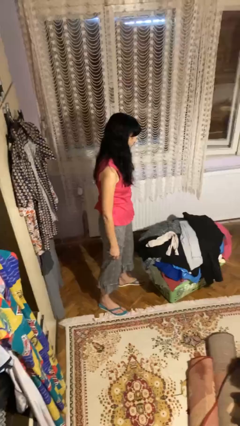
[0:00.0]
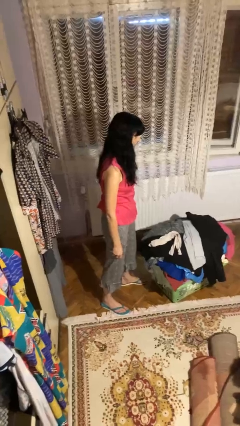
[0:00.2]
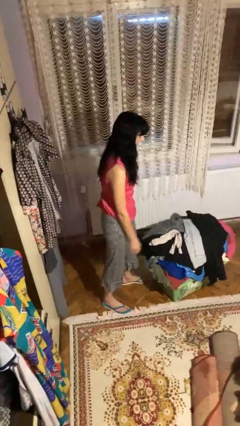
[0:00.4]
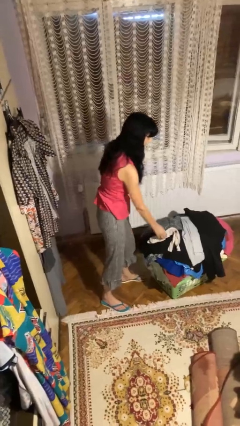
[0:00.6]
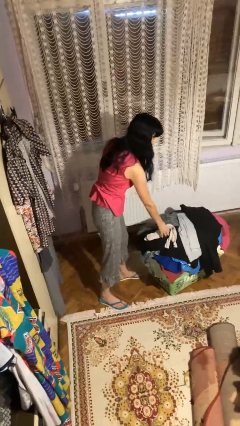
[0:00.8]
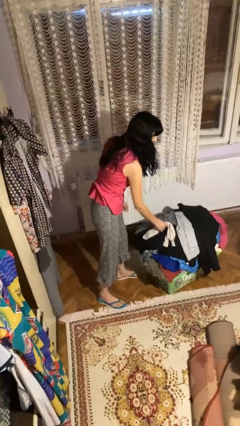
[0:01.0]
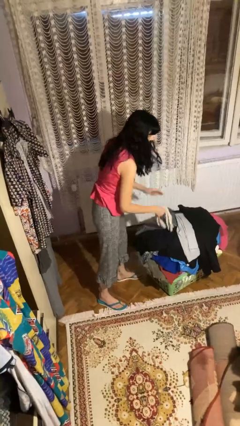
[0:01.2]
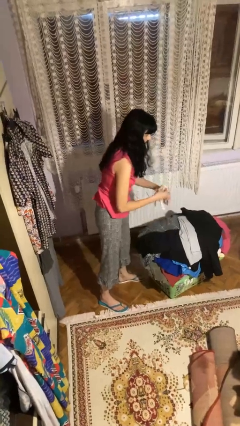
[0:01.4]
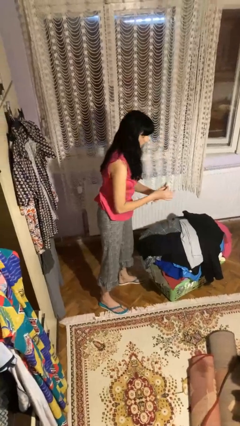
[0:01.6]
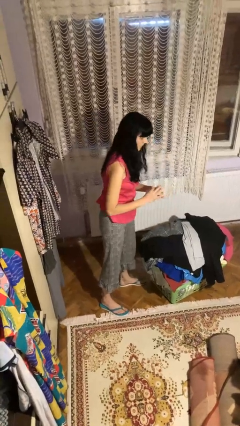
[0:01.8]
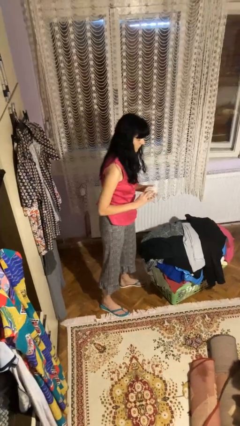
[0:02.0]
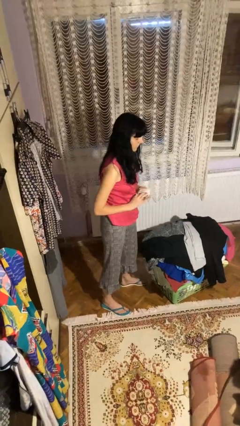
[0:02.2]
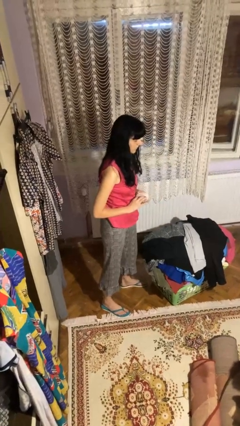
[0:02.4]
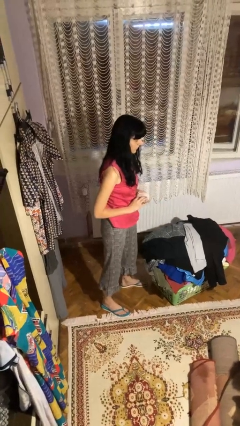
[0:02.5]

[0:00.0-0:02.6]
person folds socks

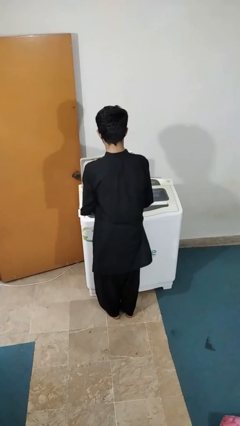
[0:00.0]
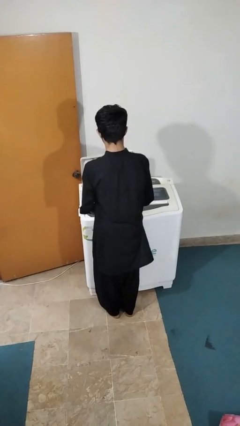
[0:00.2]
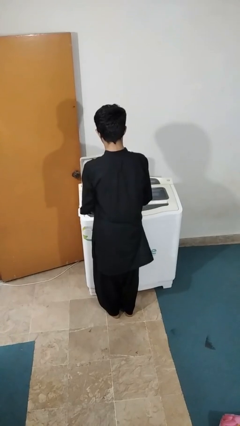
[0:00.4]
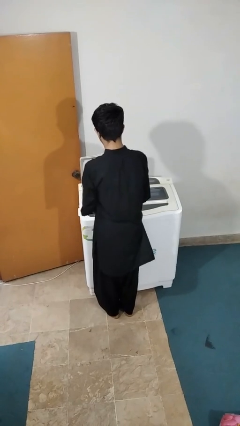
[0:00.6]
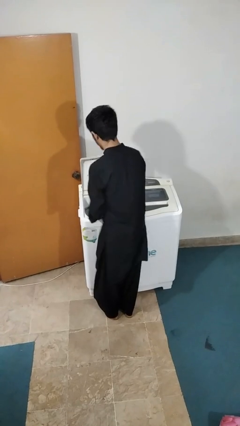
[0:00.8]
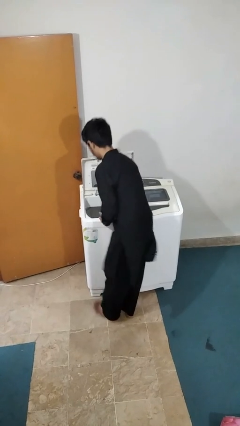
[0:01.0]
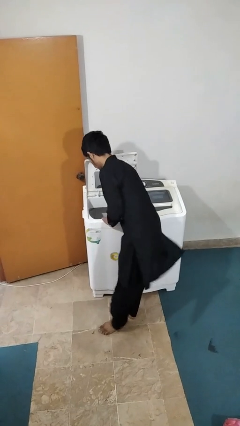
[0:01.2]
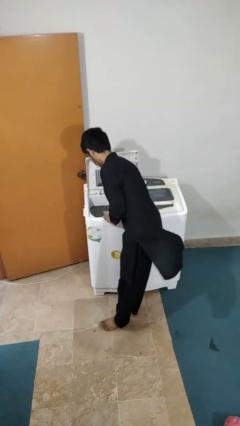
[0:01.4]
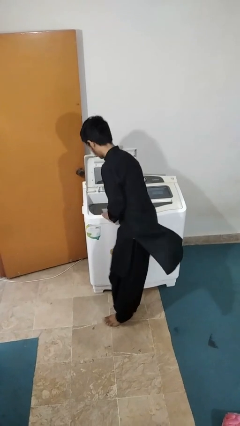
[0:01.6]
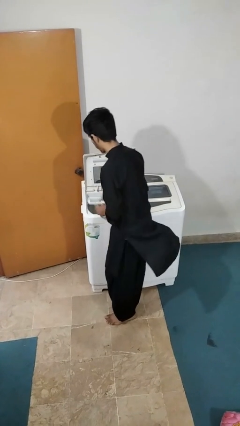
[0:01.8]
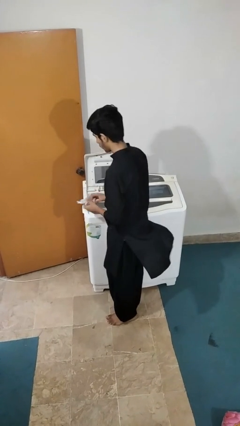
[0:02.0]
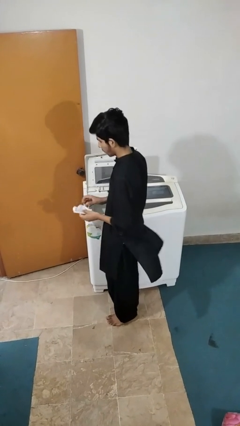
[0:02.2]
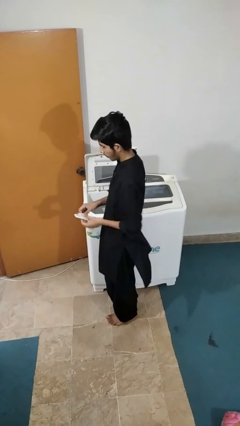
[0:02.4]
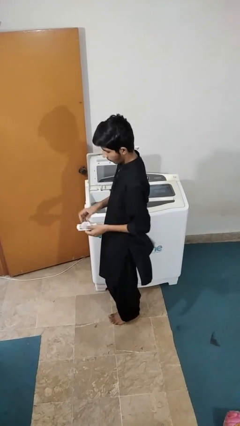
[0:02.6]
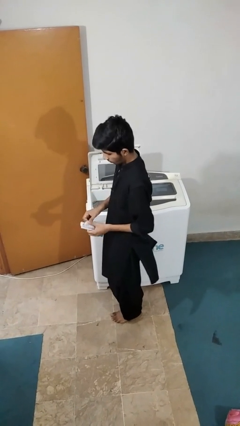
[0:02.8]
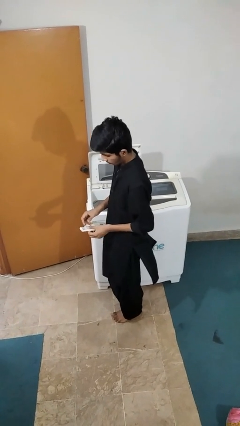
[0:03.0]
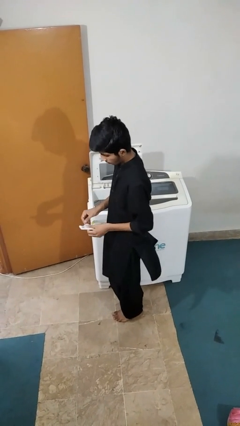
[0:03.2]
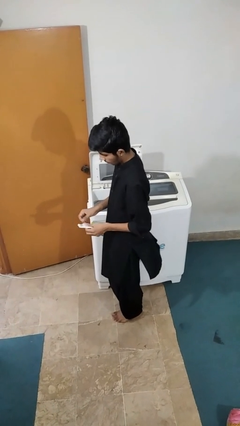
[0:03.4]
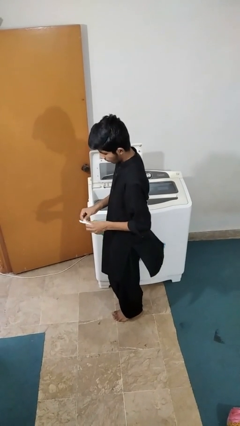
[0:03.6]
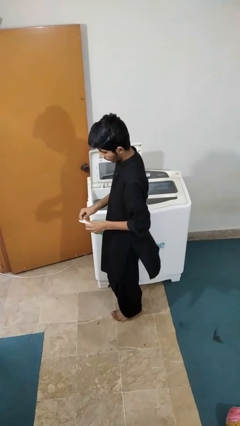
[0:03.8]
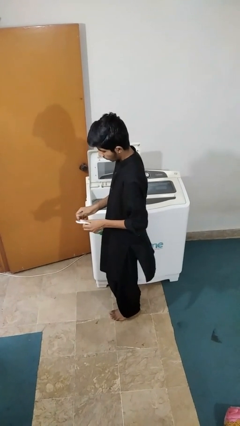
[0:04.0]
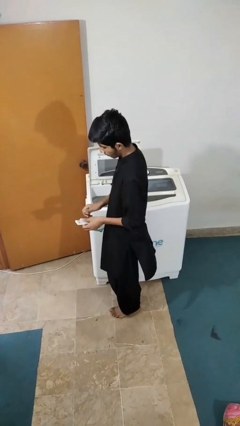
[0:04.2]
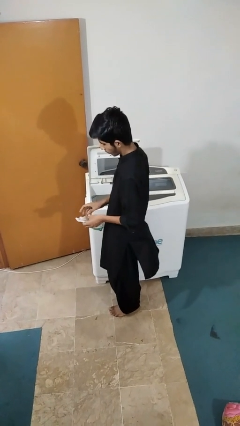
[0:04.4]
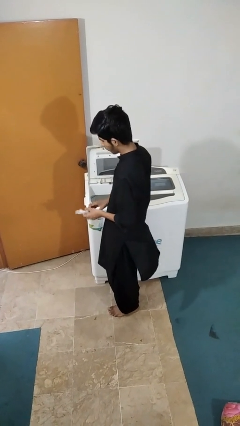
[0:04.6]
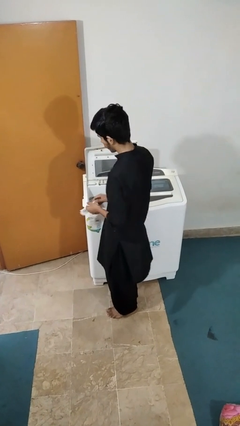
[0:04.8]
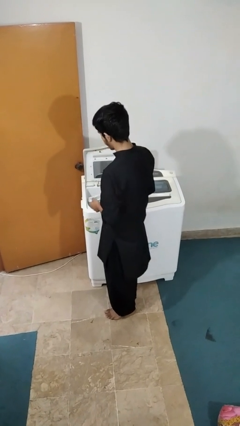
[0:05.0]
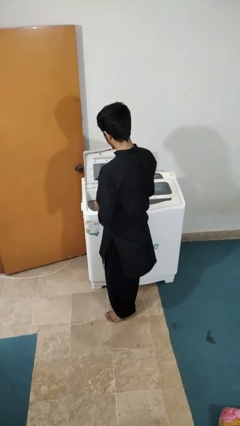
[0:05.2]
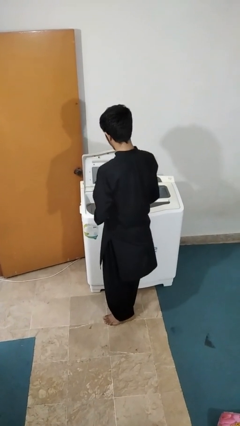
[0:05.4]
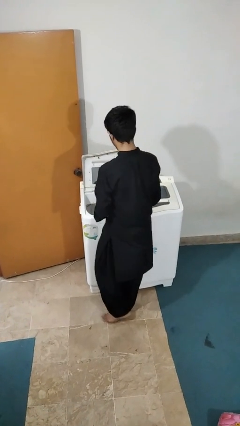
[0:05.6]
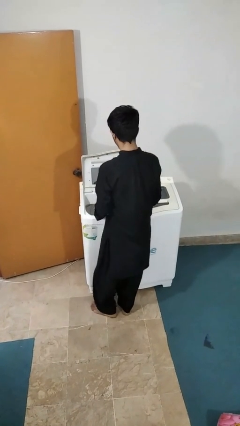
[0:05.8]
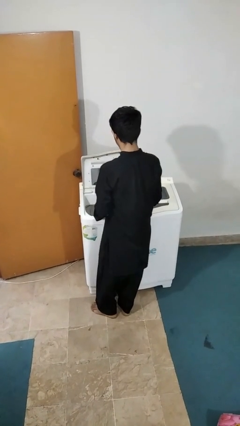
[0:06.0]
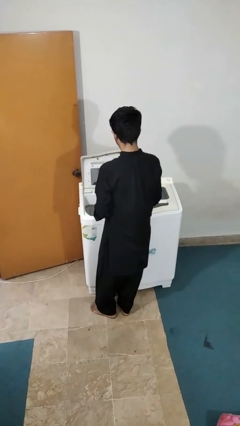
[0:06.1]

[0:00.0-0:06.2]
person cleans dryer lint trap

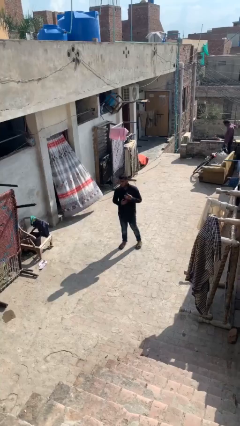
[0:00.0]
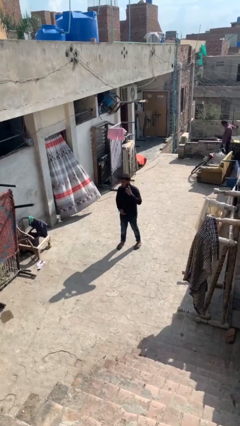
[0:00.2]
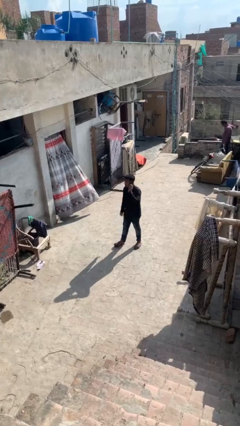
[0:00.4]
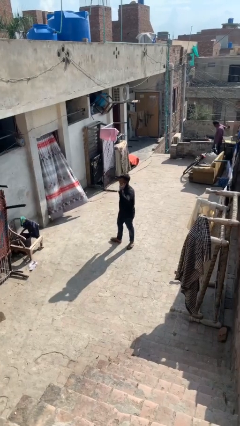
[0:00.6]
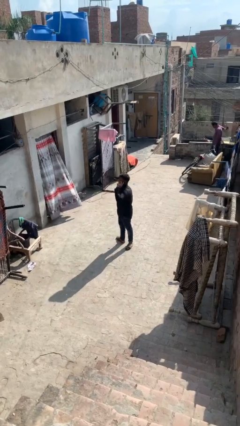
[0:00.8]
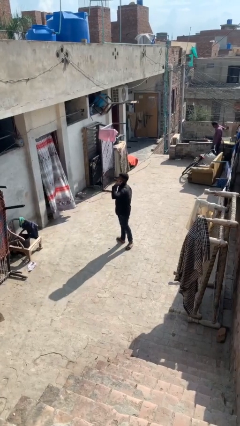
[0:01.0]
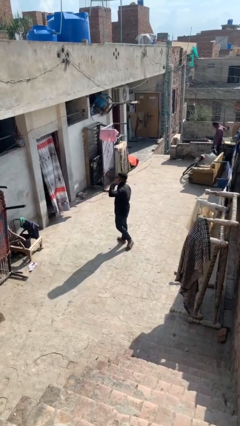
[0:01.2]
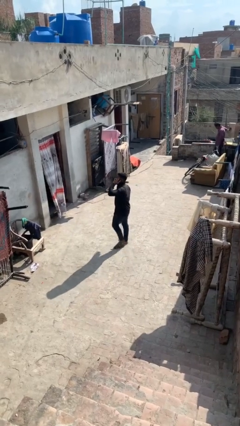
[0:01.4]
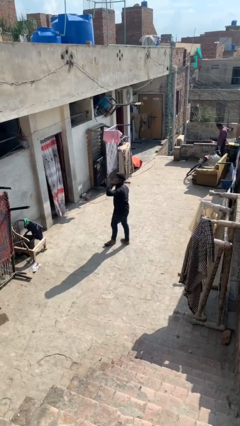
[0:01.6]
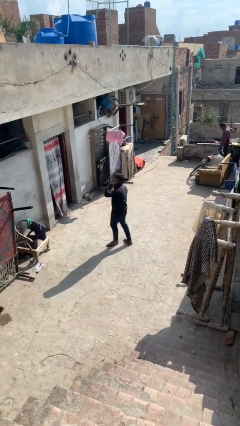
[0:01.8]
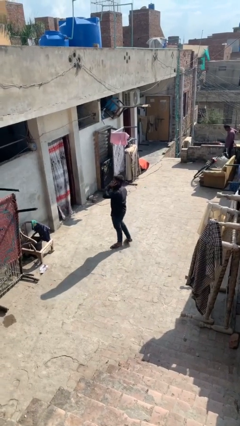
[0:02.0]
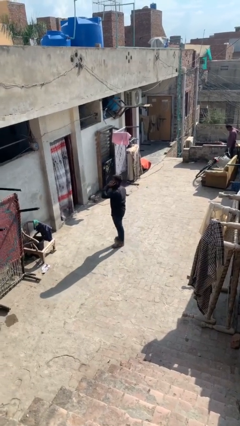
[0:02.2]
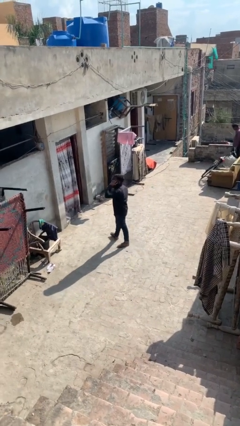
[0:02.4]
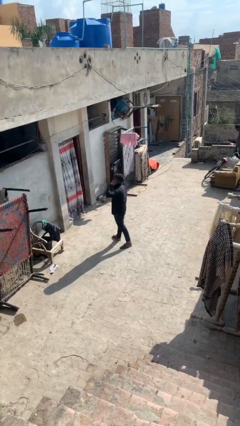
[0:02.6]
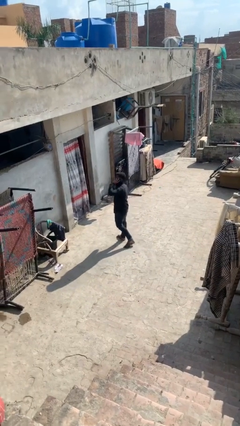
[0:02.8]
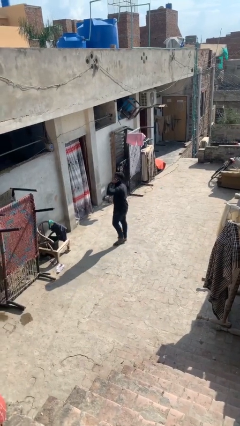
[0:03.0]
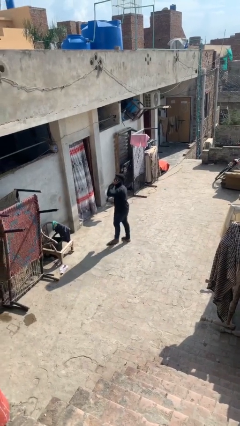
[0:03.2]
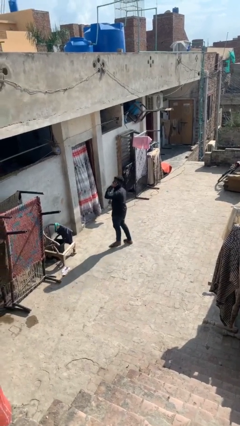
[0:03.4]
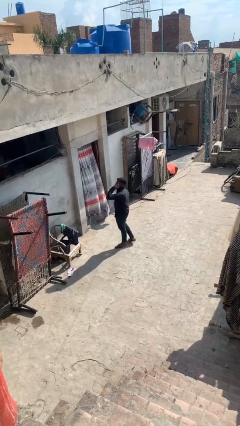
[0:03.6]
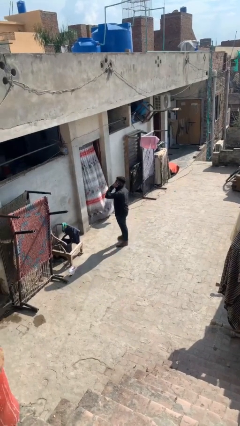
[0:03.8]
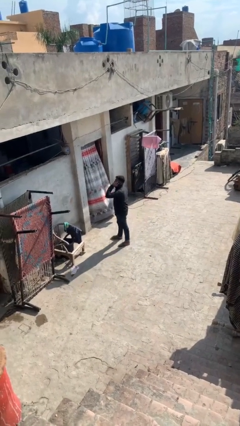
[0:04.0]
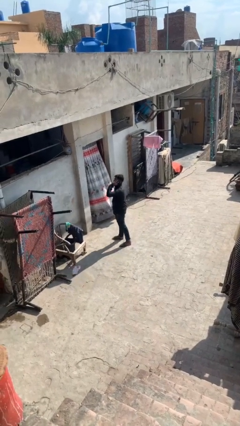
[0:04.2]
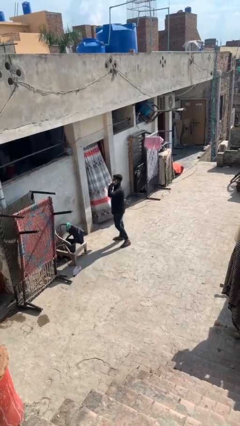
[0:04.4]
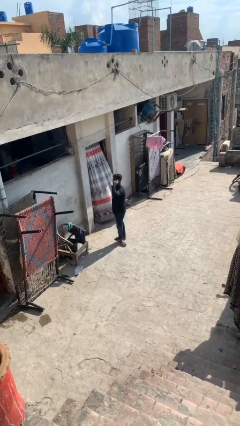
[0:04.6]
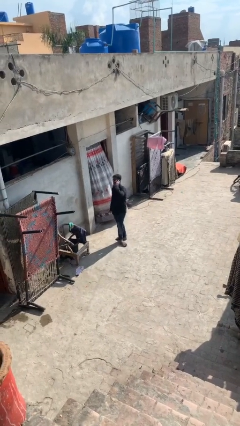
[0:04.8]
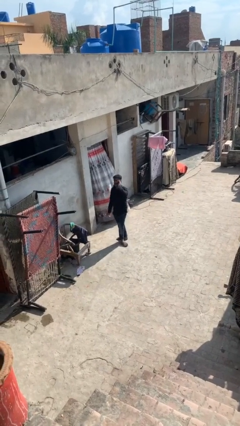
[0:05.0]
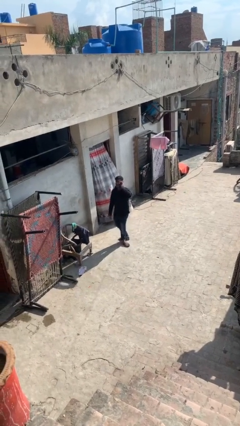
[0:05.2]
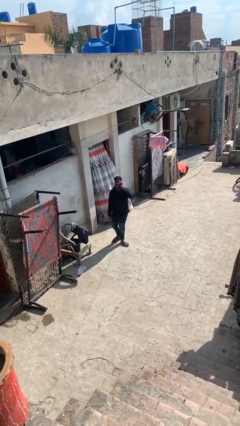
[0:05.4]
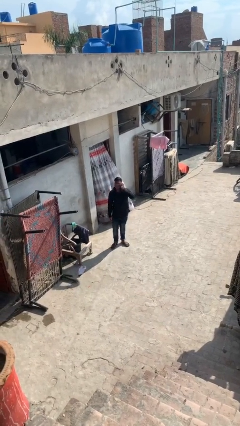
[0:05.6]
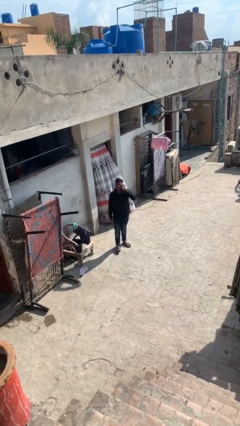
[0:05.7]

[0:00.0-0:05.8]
person talks on phone

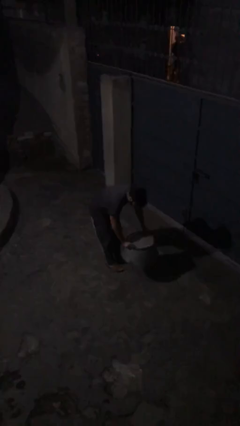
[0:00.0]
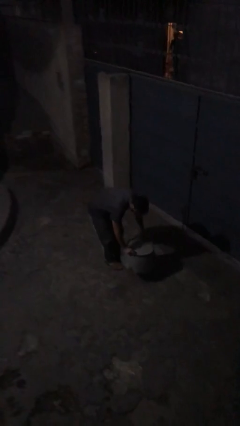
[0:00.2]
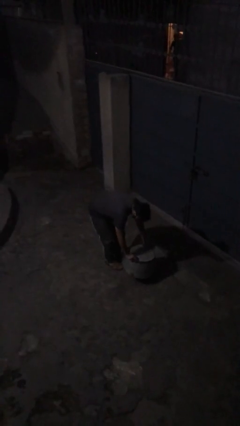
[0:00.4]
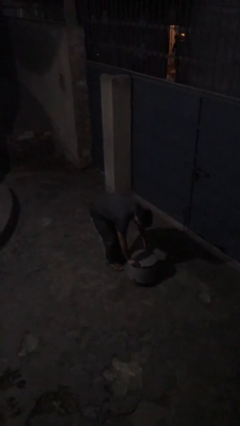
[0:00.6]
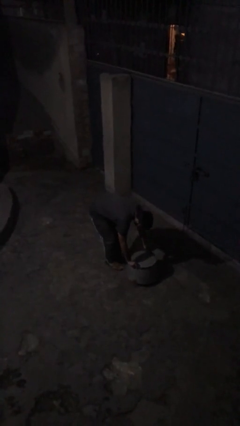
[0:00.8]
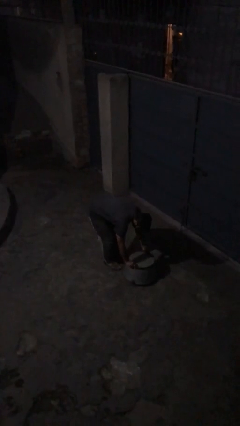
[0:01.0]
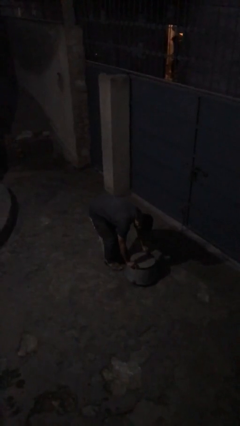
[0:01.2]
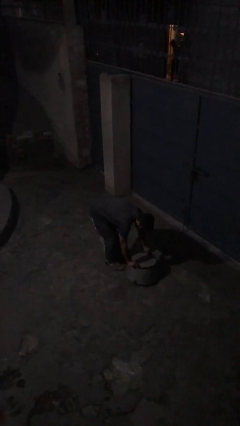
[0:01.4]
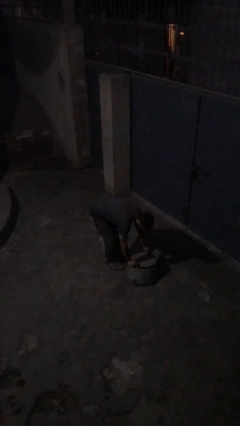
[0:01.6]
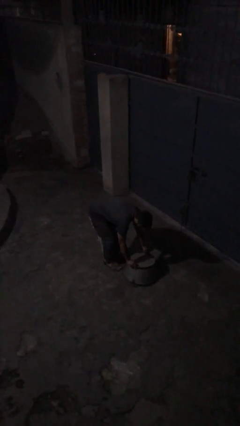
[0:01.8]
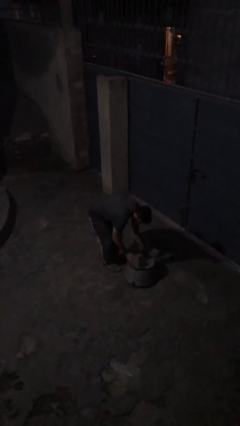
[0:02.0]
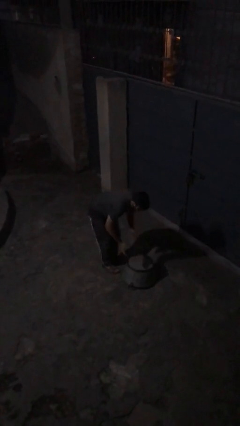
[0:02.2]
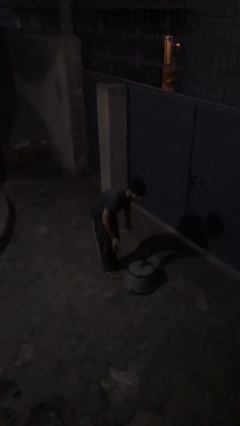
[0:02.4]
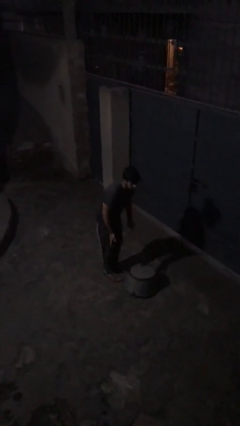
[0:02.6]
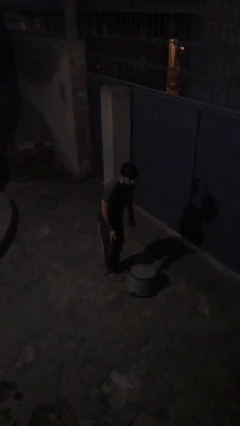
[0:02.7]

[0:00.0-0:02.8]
person puts down object on floor

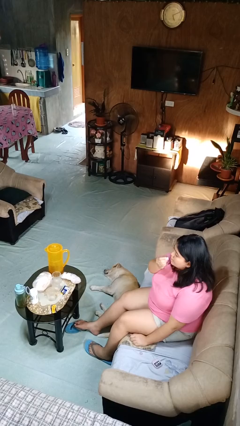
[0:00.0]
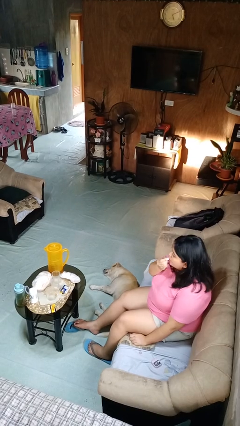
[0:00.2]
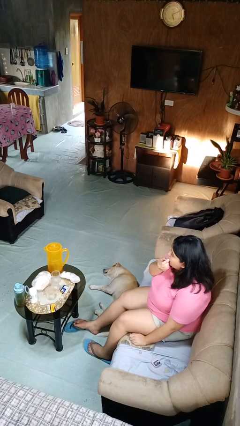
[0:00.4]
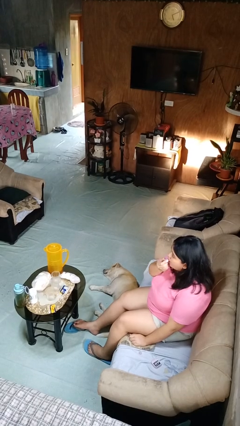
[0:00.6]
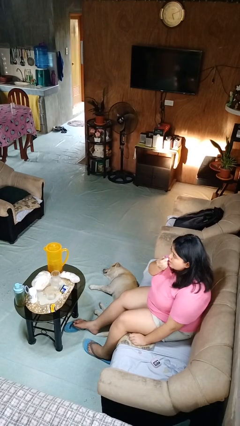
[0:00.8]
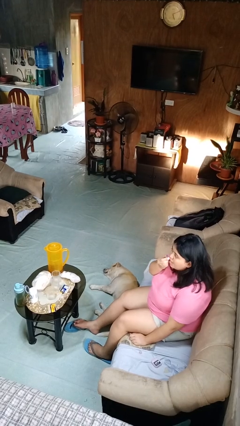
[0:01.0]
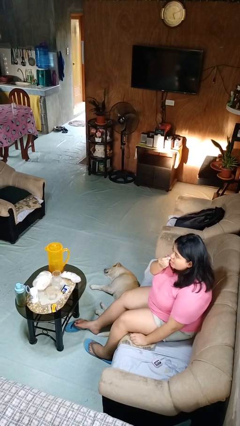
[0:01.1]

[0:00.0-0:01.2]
person applies lip makeup
